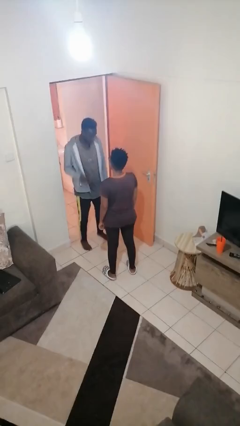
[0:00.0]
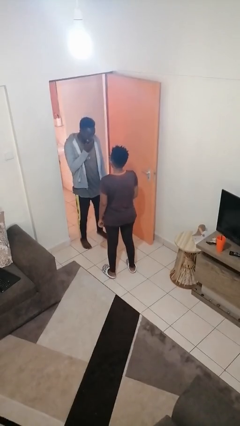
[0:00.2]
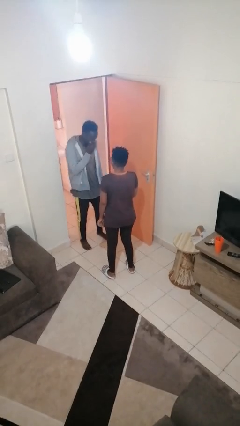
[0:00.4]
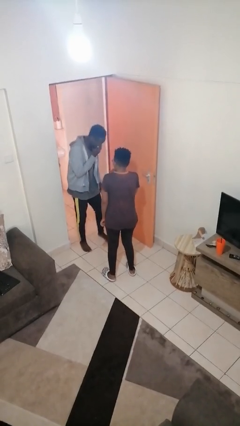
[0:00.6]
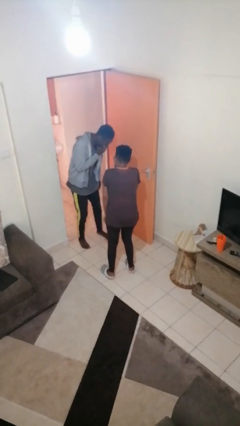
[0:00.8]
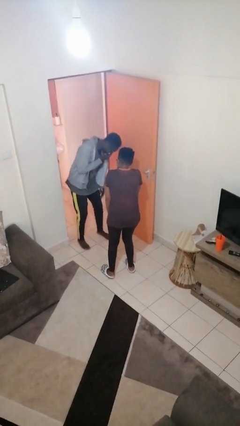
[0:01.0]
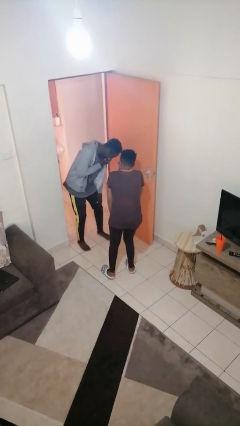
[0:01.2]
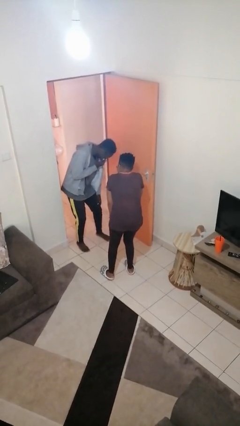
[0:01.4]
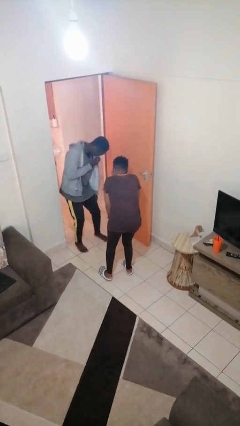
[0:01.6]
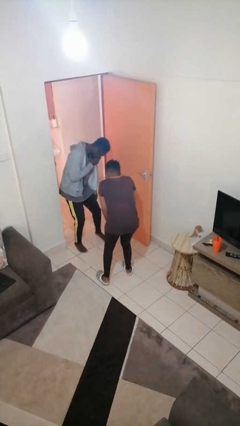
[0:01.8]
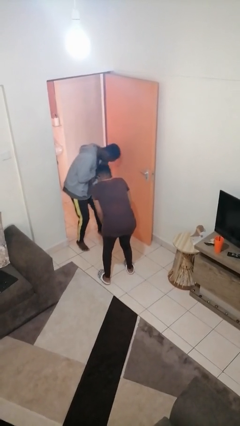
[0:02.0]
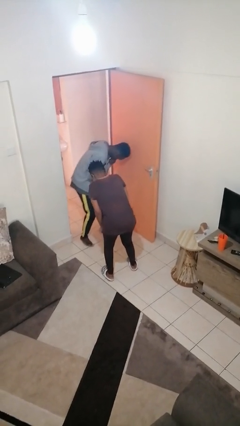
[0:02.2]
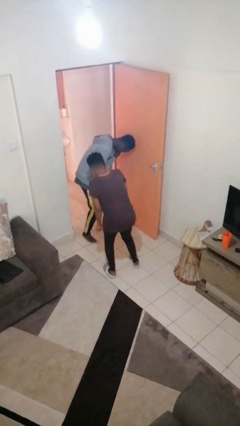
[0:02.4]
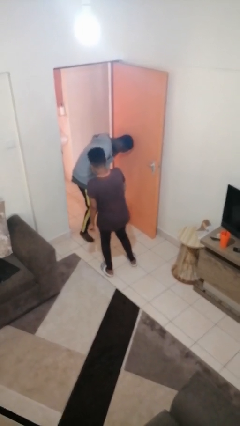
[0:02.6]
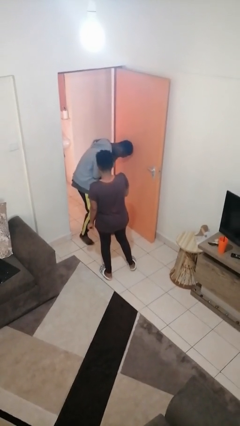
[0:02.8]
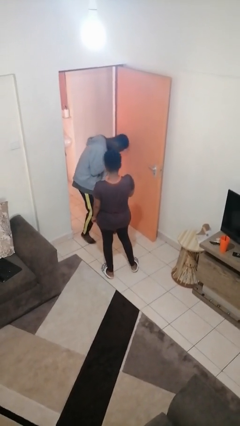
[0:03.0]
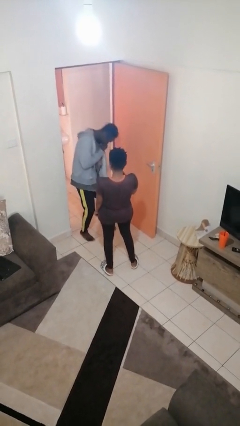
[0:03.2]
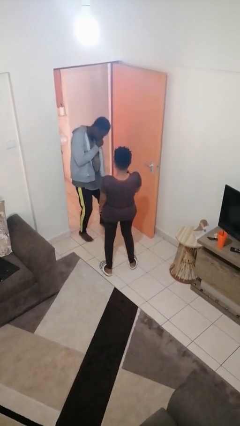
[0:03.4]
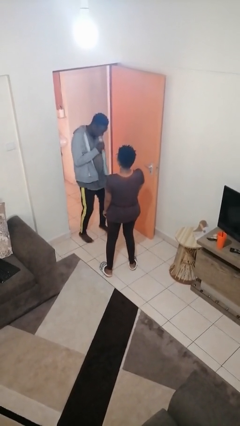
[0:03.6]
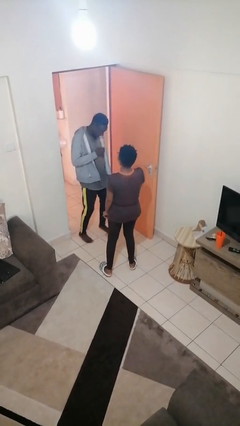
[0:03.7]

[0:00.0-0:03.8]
person laughs with person

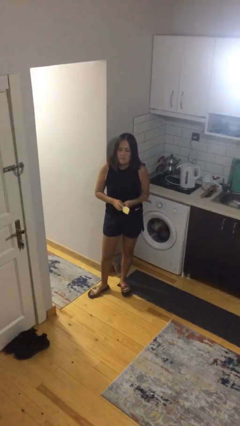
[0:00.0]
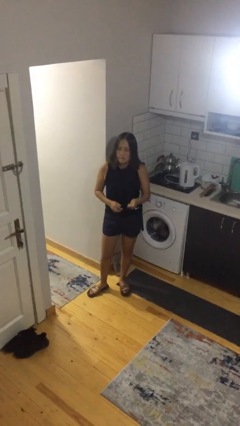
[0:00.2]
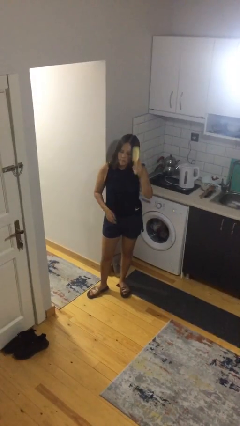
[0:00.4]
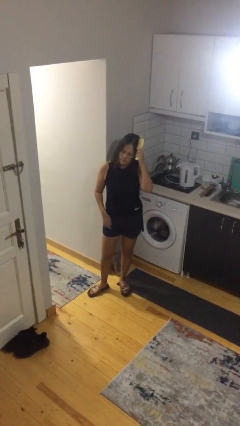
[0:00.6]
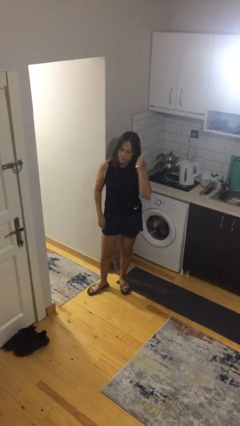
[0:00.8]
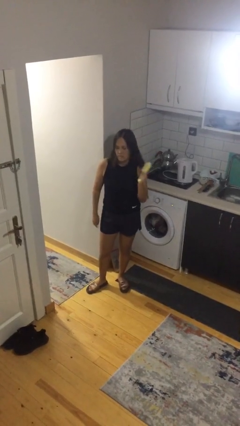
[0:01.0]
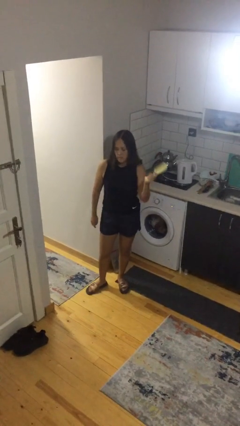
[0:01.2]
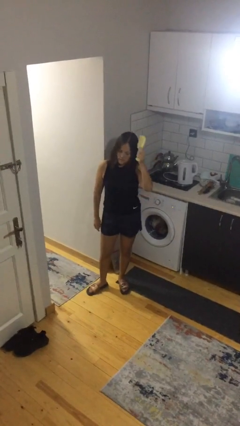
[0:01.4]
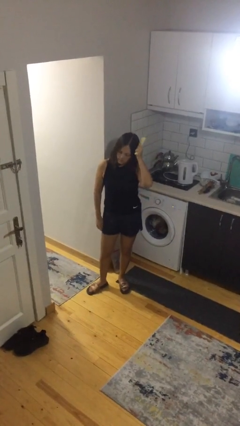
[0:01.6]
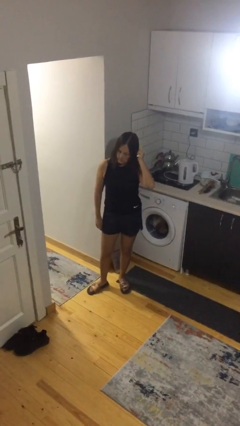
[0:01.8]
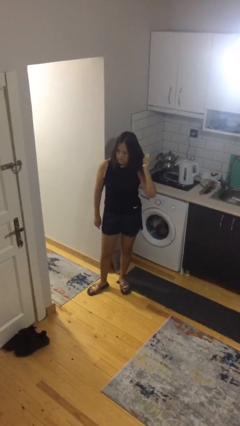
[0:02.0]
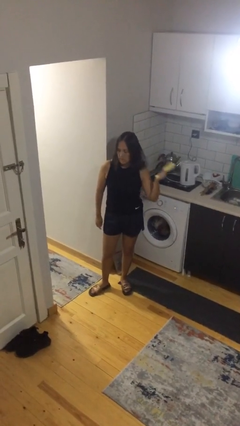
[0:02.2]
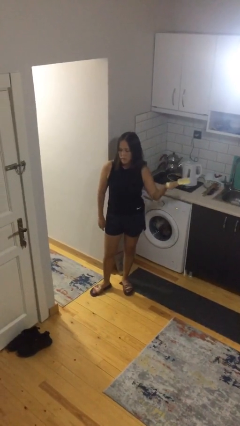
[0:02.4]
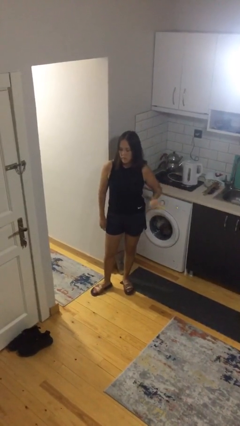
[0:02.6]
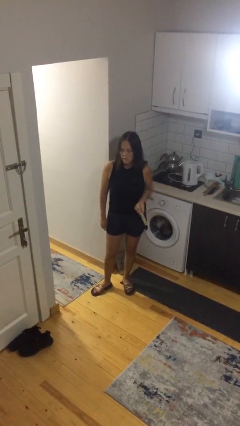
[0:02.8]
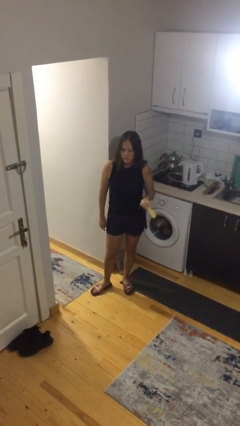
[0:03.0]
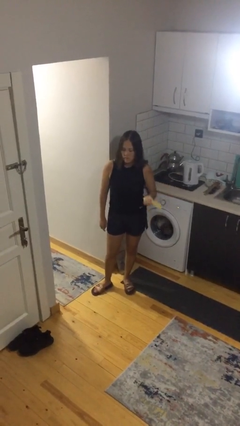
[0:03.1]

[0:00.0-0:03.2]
person brushes hair

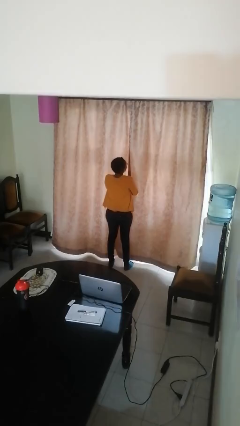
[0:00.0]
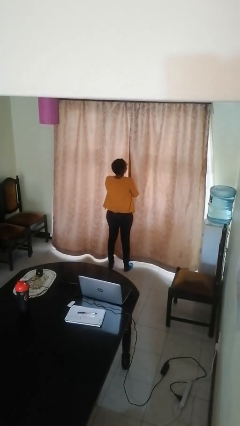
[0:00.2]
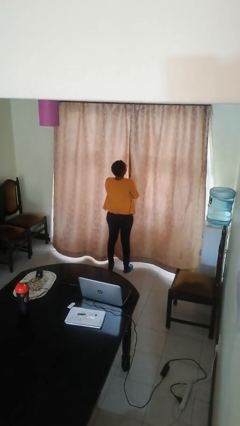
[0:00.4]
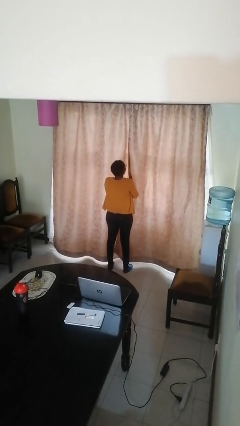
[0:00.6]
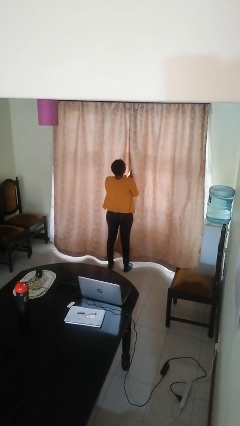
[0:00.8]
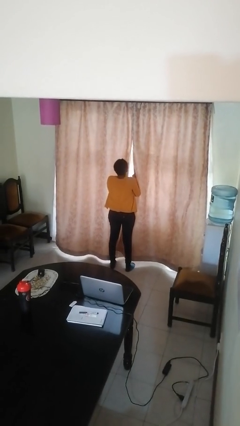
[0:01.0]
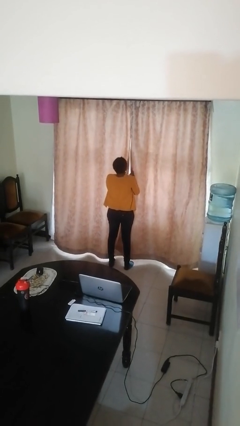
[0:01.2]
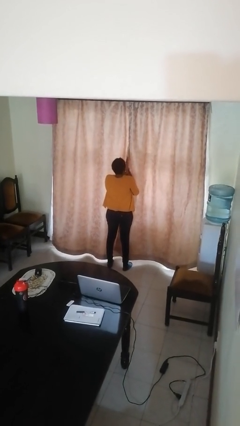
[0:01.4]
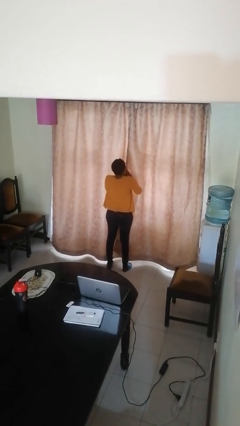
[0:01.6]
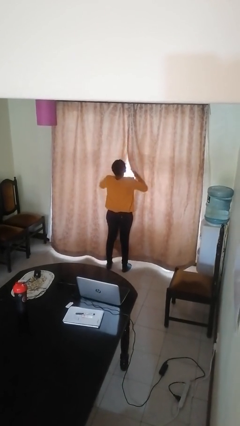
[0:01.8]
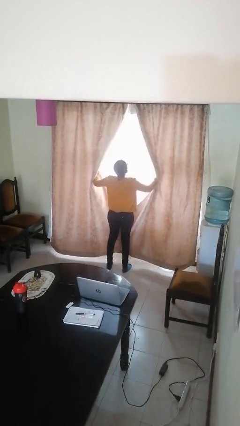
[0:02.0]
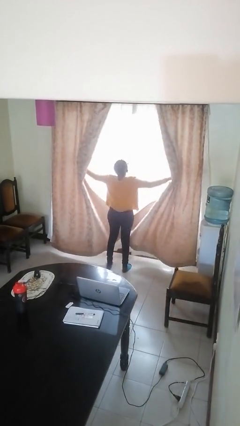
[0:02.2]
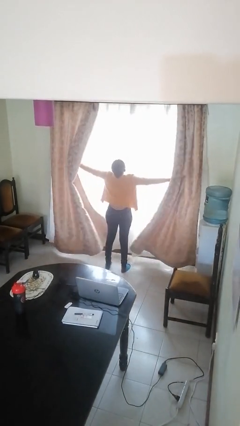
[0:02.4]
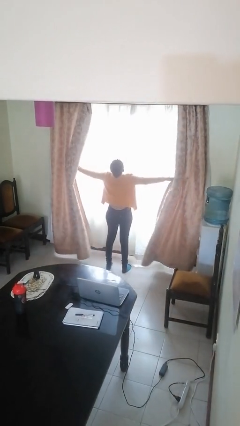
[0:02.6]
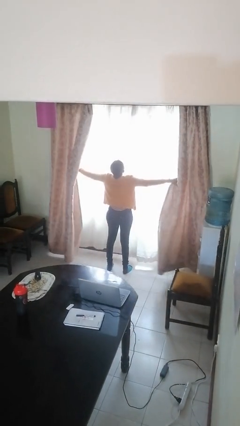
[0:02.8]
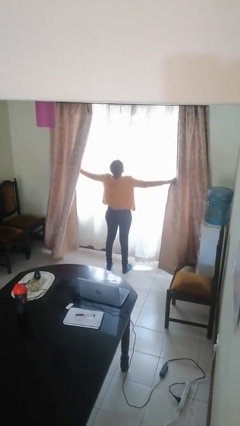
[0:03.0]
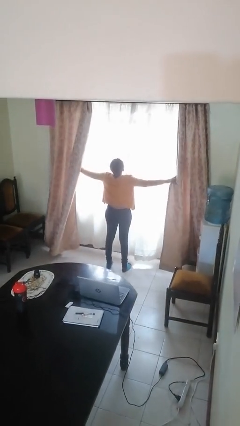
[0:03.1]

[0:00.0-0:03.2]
person opens curtains

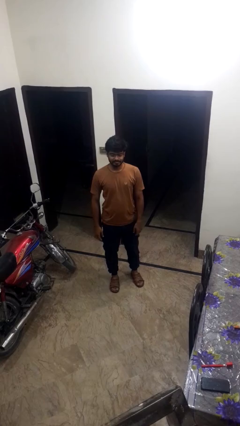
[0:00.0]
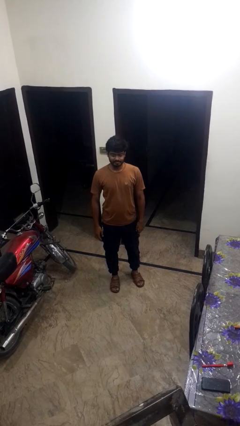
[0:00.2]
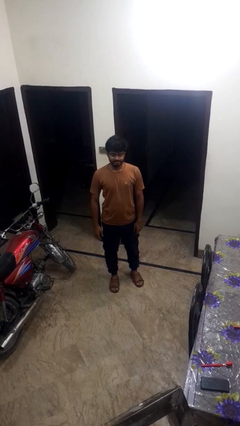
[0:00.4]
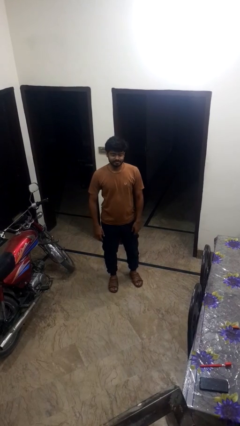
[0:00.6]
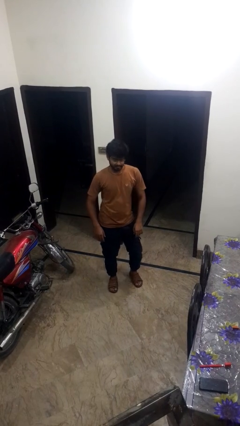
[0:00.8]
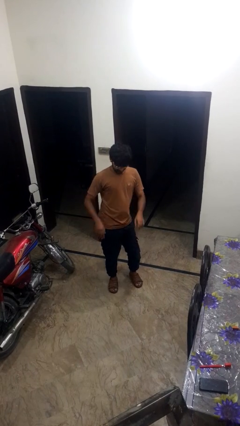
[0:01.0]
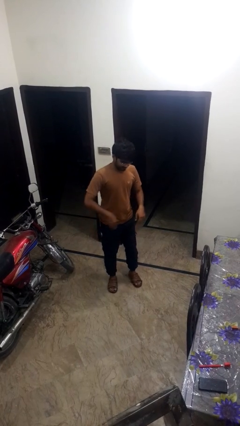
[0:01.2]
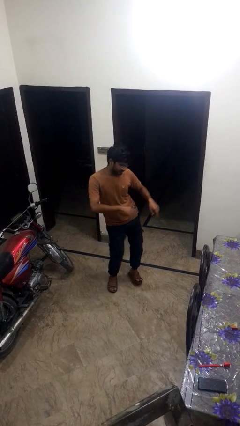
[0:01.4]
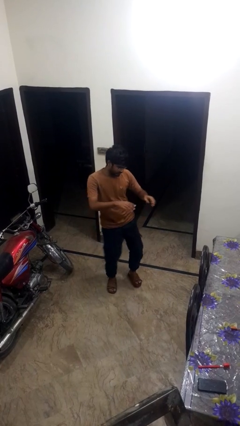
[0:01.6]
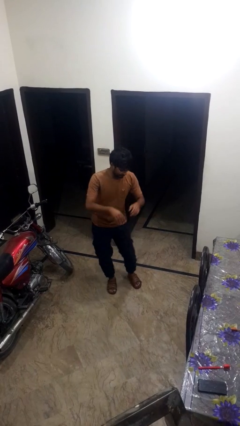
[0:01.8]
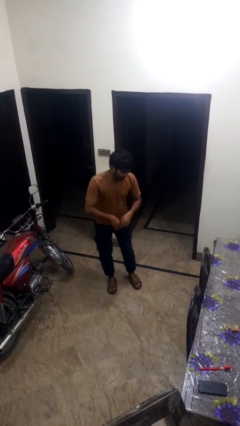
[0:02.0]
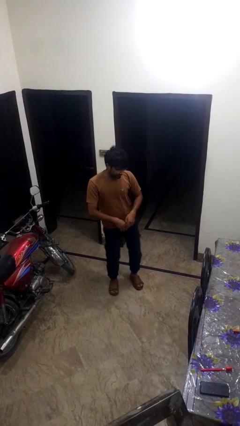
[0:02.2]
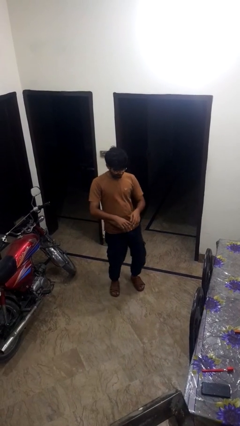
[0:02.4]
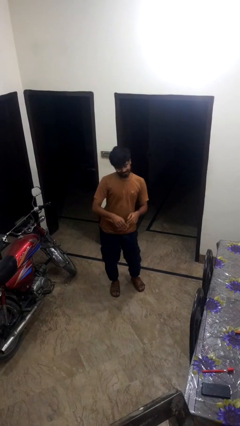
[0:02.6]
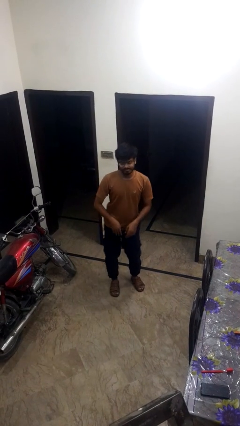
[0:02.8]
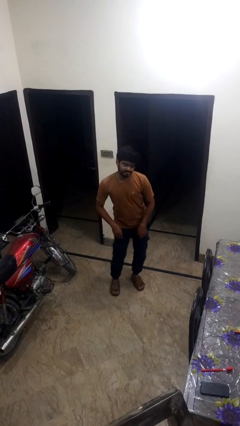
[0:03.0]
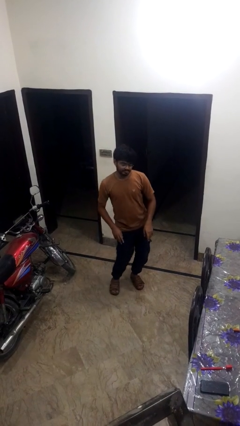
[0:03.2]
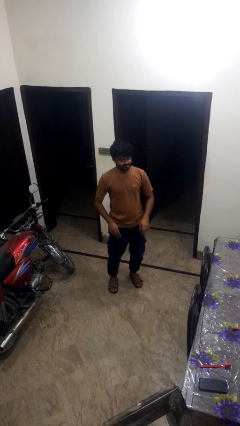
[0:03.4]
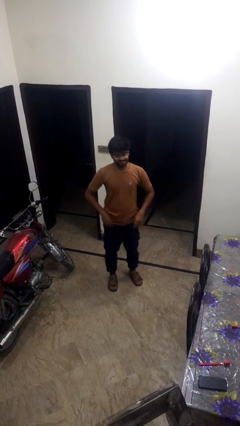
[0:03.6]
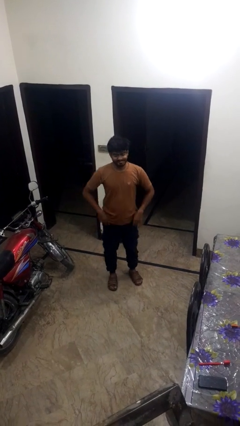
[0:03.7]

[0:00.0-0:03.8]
person wiggles hips

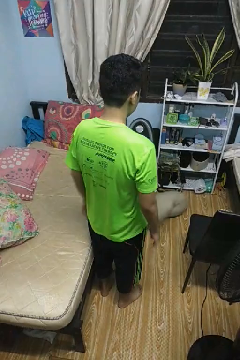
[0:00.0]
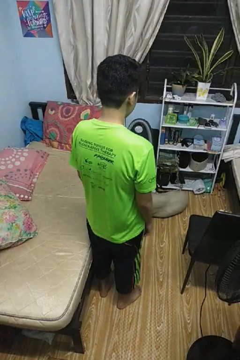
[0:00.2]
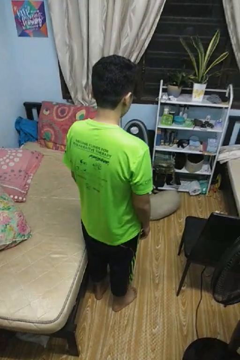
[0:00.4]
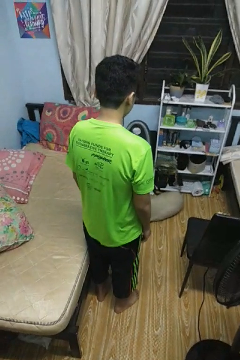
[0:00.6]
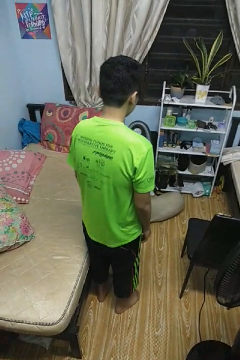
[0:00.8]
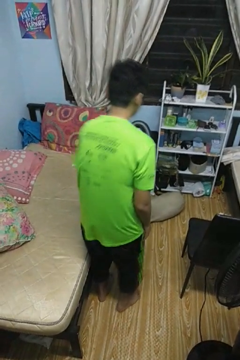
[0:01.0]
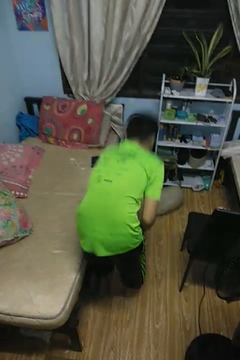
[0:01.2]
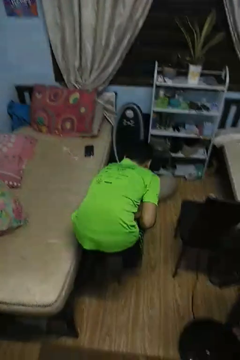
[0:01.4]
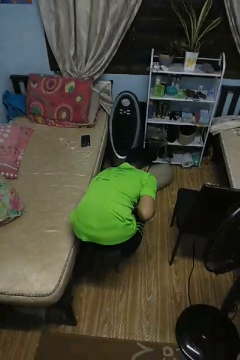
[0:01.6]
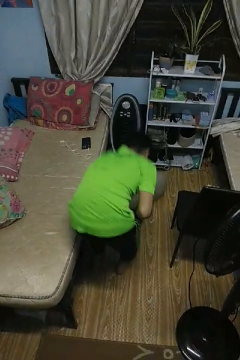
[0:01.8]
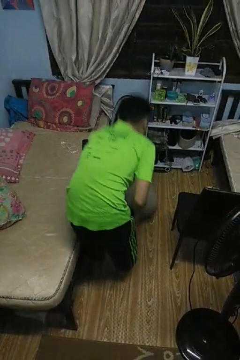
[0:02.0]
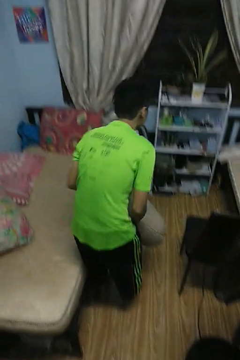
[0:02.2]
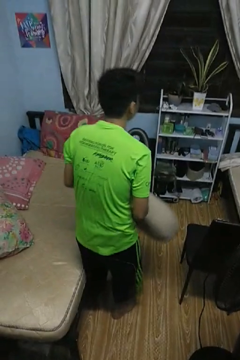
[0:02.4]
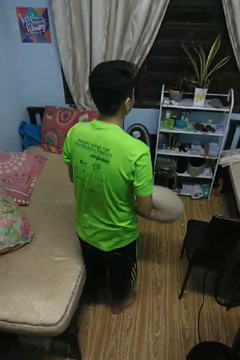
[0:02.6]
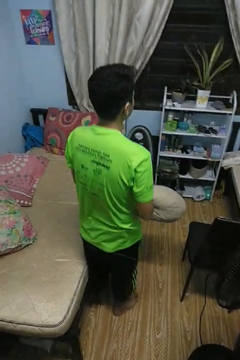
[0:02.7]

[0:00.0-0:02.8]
person picks up object from floor

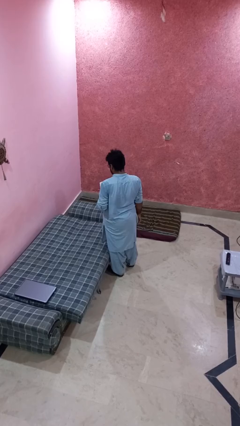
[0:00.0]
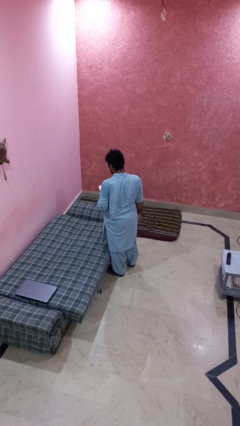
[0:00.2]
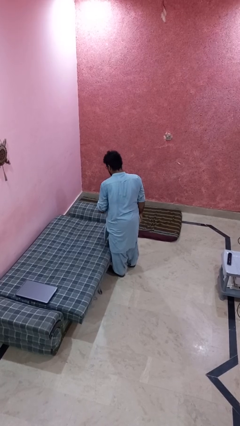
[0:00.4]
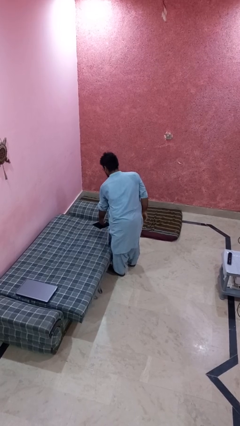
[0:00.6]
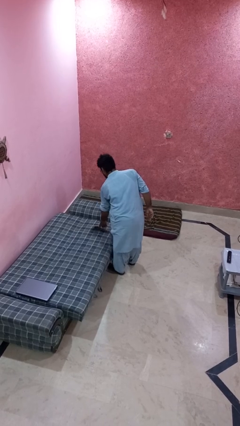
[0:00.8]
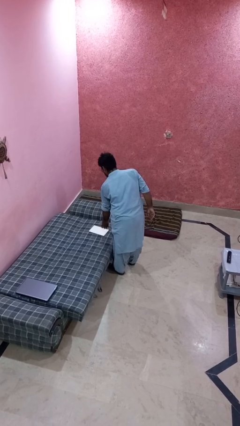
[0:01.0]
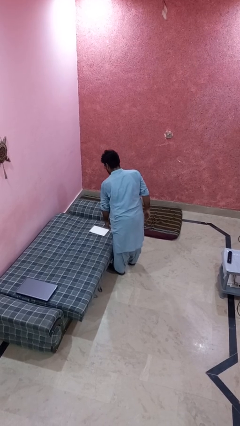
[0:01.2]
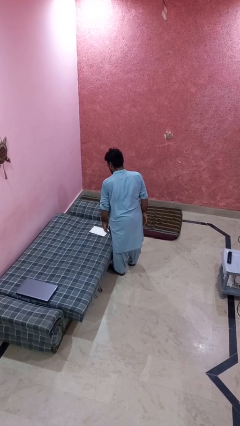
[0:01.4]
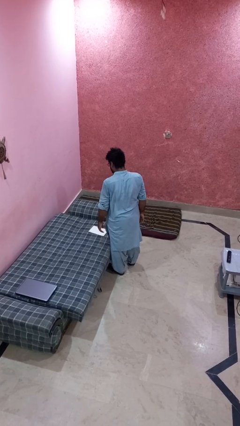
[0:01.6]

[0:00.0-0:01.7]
person puts down object on bed
